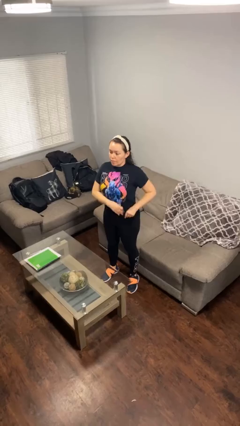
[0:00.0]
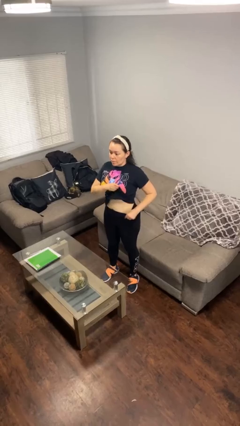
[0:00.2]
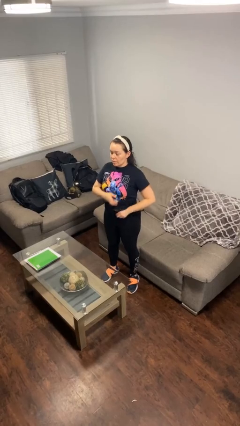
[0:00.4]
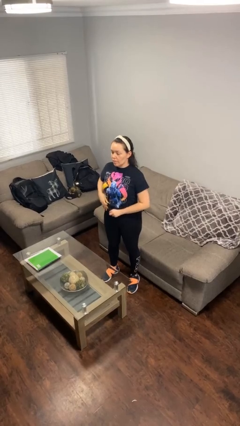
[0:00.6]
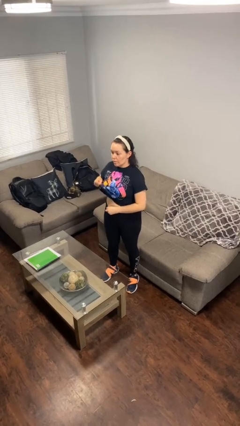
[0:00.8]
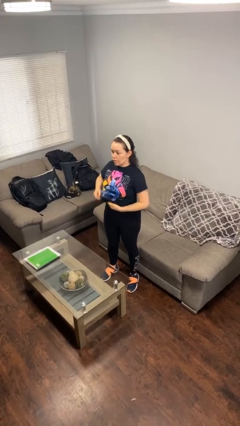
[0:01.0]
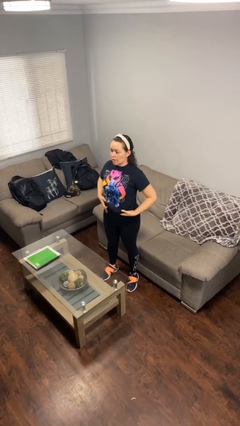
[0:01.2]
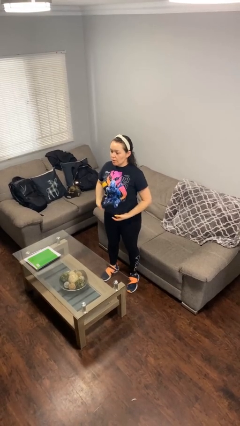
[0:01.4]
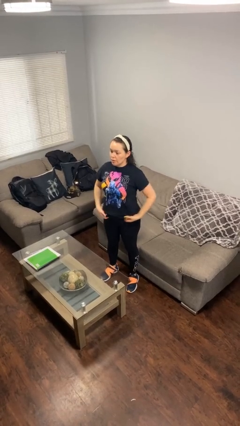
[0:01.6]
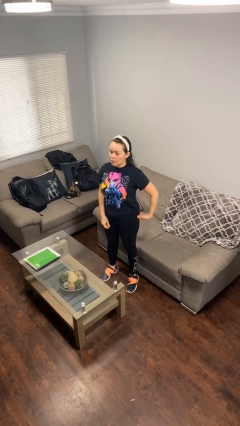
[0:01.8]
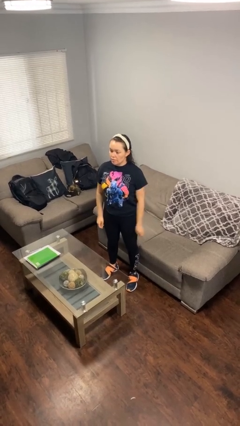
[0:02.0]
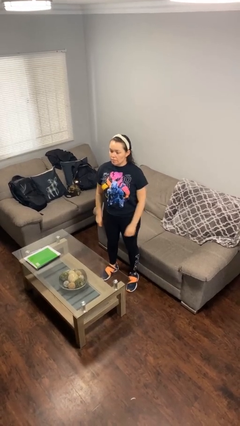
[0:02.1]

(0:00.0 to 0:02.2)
person untucks shirt

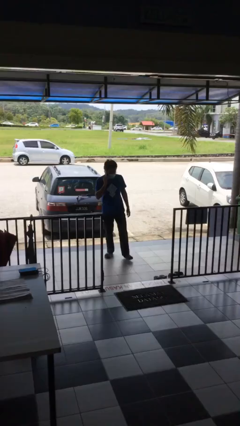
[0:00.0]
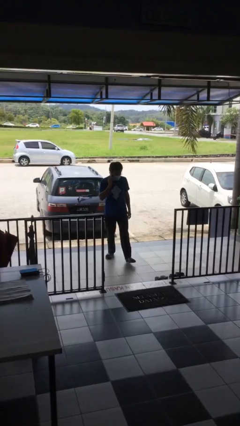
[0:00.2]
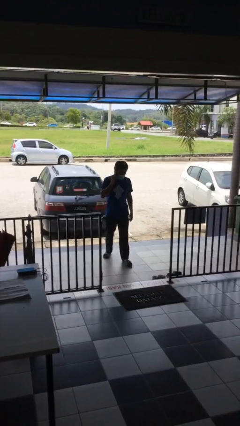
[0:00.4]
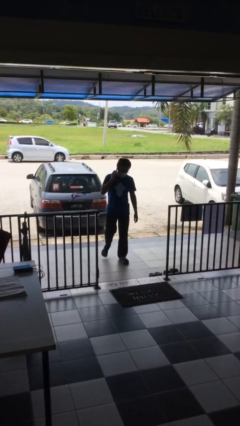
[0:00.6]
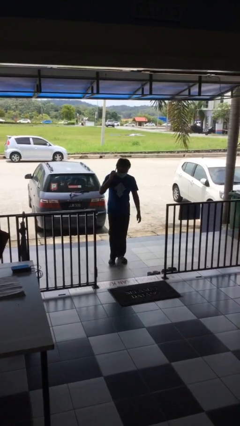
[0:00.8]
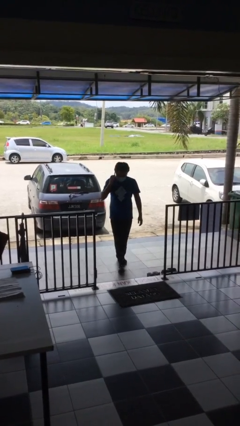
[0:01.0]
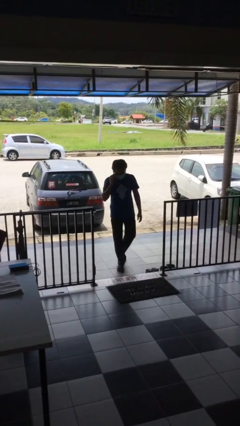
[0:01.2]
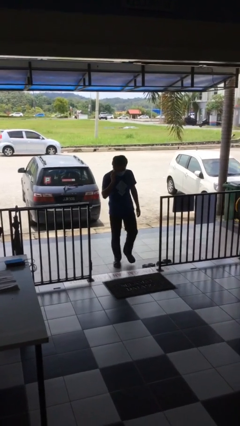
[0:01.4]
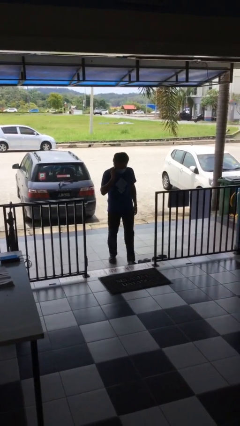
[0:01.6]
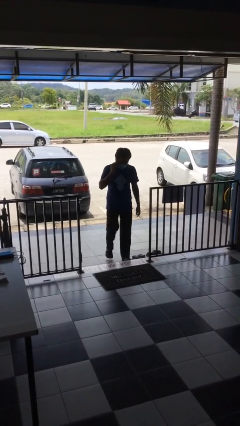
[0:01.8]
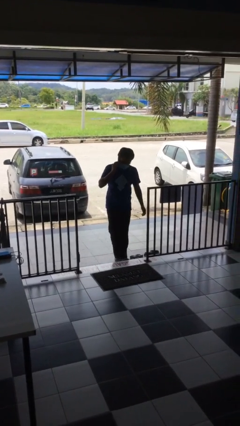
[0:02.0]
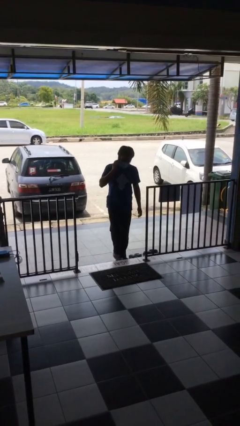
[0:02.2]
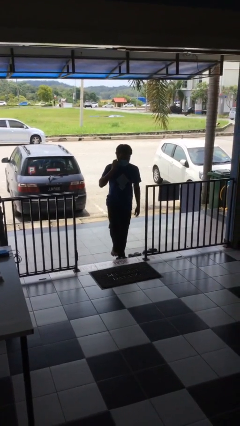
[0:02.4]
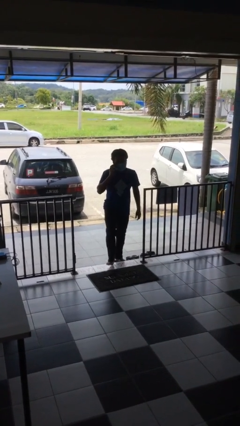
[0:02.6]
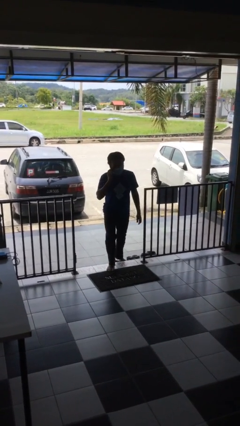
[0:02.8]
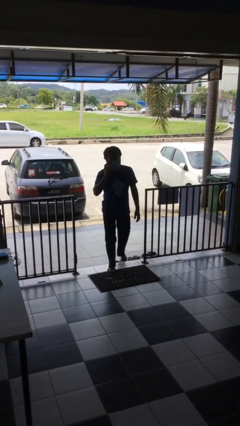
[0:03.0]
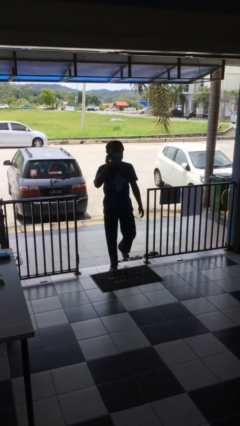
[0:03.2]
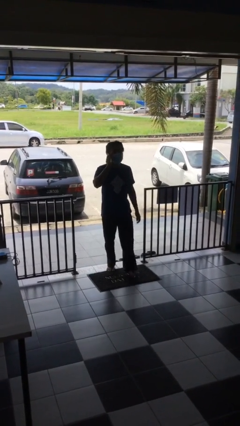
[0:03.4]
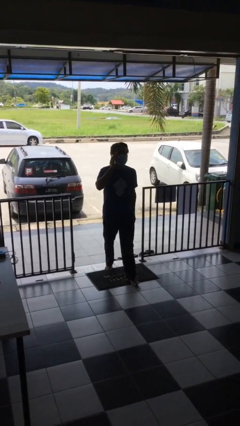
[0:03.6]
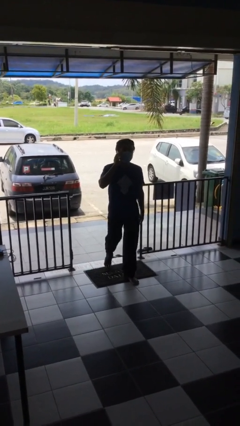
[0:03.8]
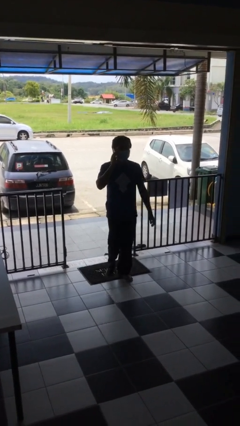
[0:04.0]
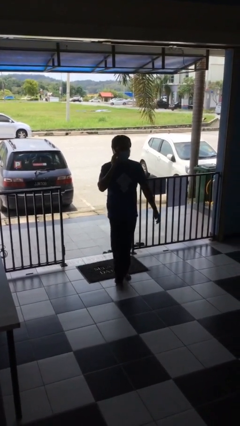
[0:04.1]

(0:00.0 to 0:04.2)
person enters scene through structure

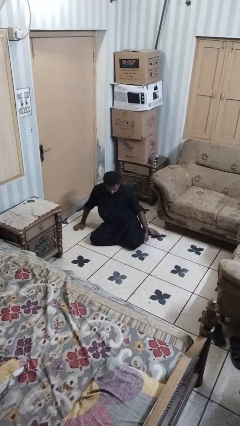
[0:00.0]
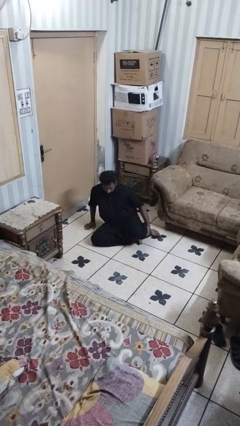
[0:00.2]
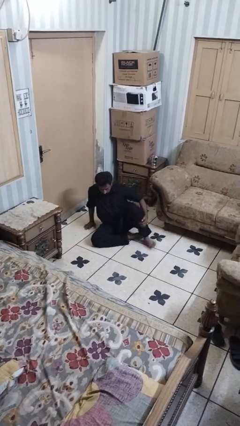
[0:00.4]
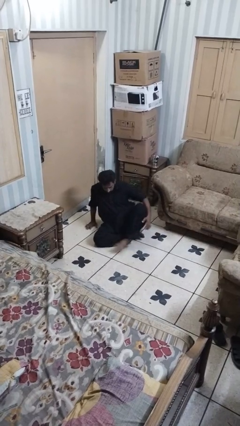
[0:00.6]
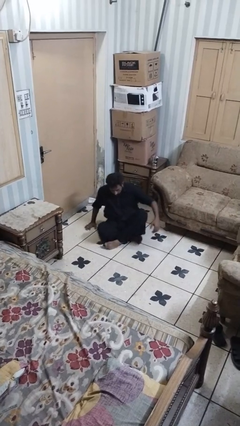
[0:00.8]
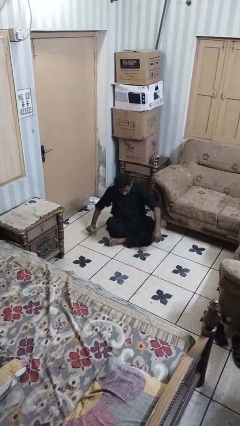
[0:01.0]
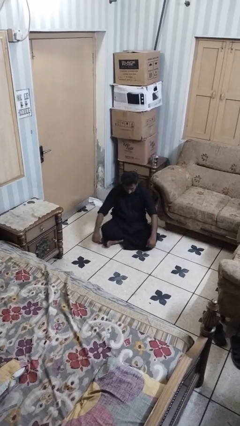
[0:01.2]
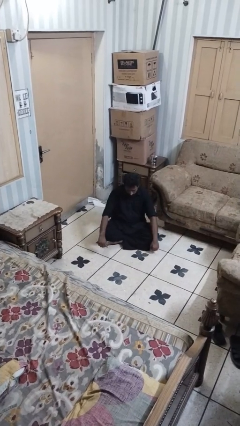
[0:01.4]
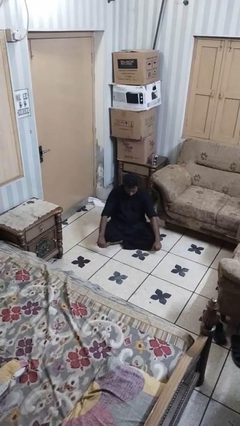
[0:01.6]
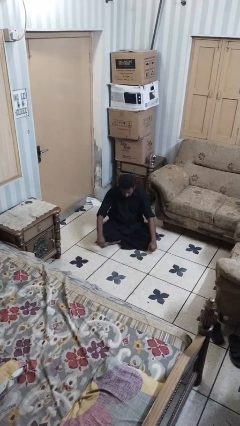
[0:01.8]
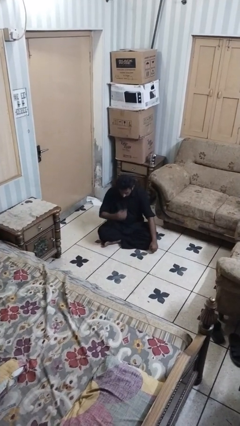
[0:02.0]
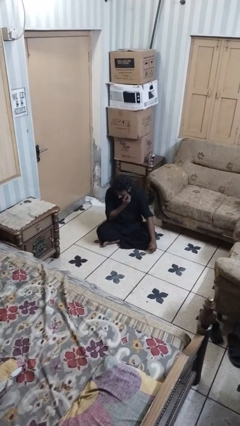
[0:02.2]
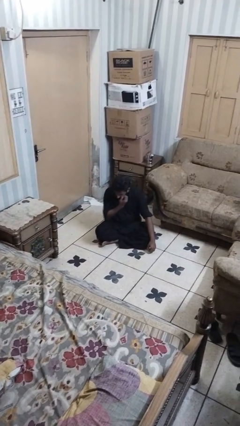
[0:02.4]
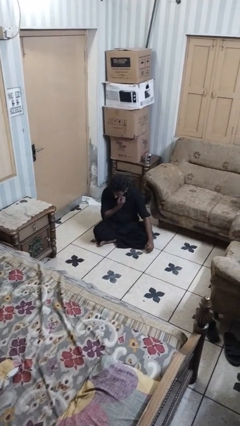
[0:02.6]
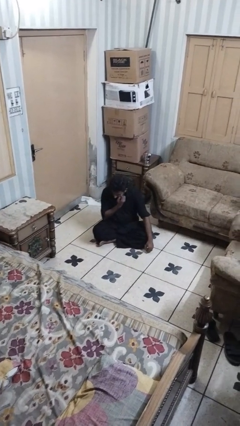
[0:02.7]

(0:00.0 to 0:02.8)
person crosses legs

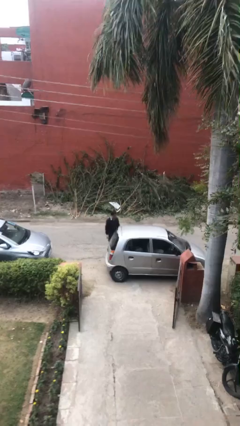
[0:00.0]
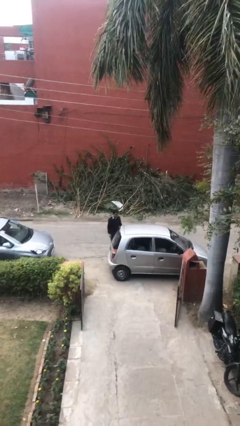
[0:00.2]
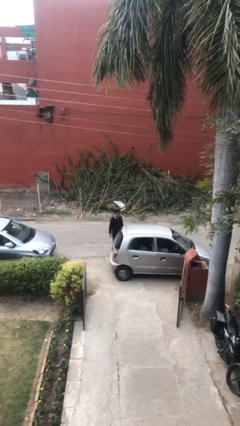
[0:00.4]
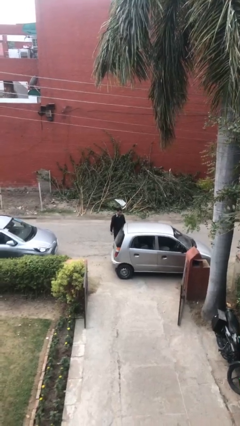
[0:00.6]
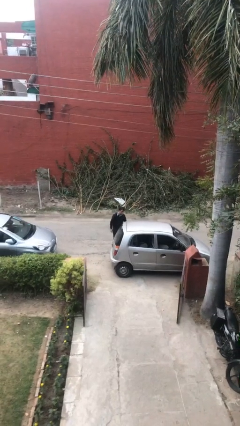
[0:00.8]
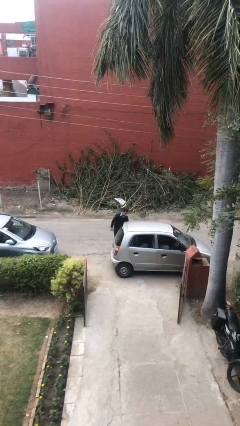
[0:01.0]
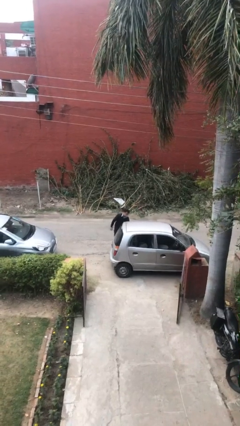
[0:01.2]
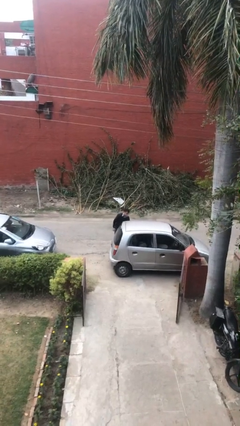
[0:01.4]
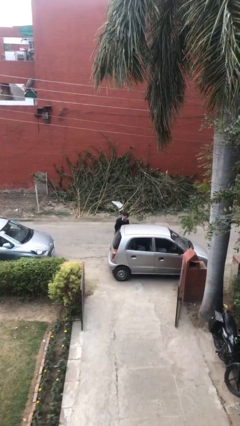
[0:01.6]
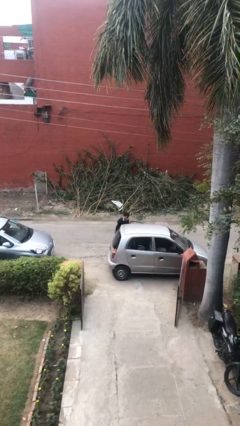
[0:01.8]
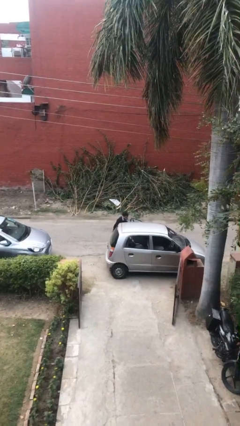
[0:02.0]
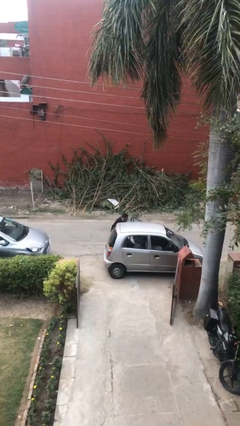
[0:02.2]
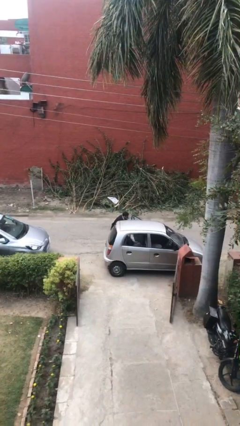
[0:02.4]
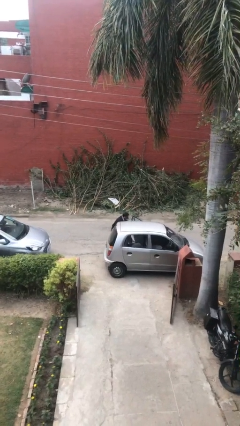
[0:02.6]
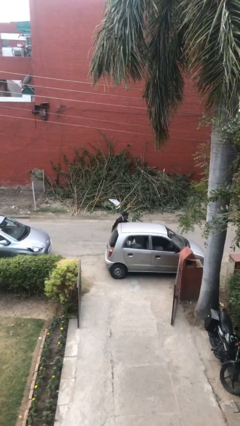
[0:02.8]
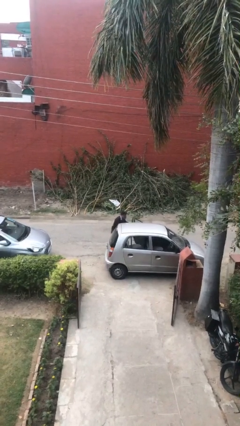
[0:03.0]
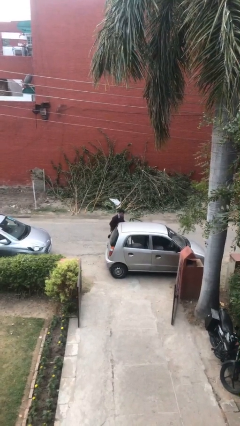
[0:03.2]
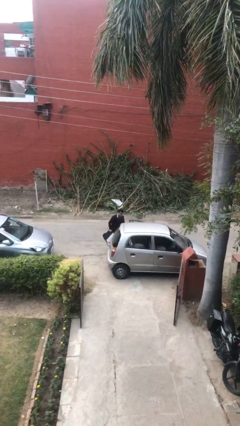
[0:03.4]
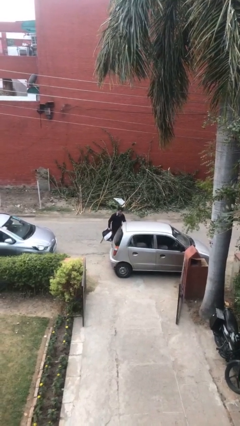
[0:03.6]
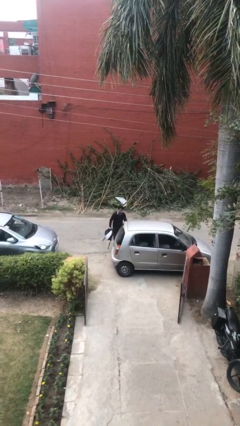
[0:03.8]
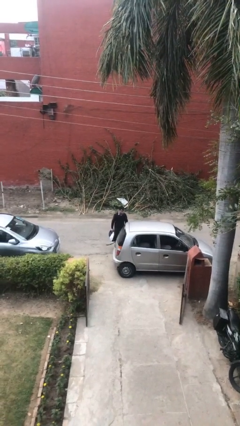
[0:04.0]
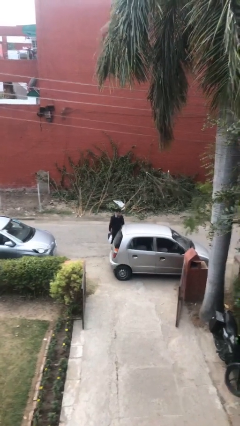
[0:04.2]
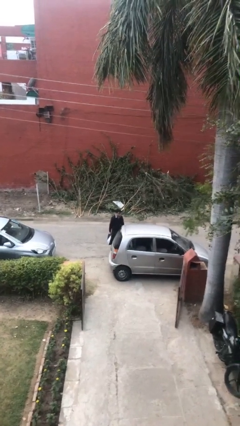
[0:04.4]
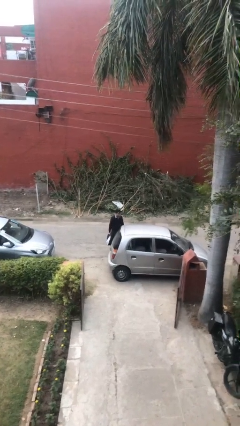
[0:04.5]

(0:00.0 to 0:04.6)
person unloads car

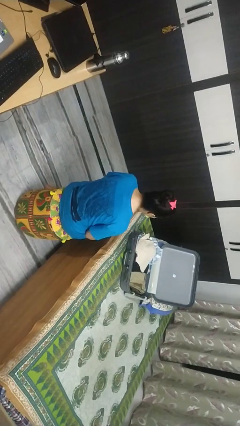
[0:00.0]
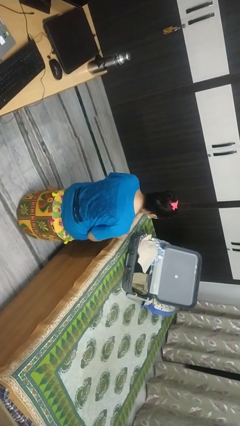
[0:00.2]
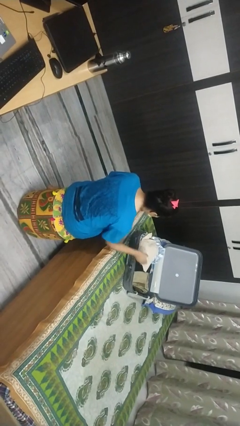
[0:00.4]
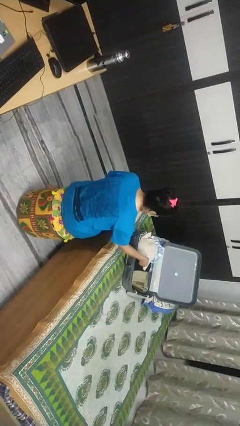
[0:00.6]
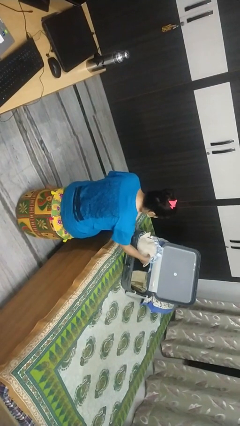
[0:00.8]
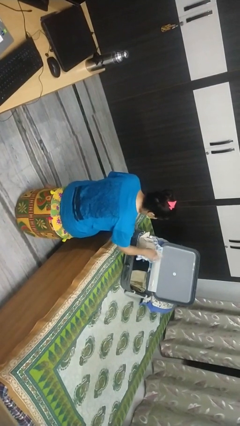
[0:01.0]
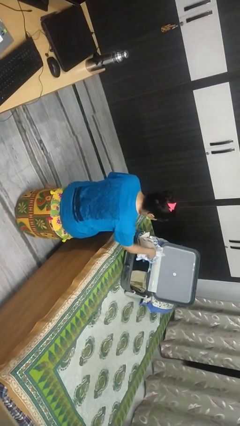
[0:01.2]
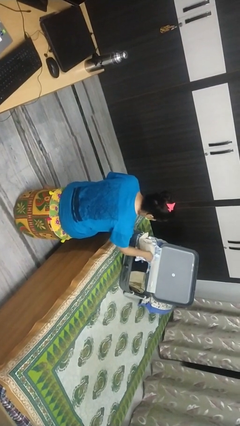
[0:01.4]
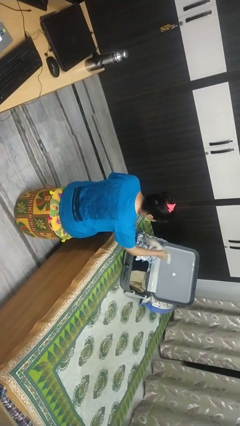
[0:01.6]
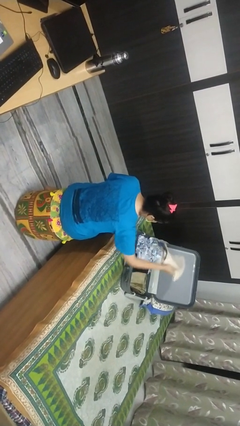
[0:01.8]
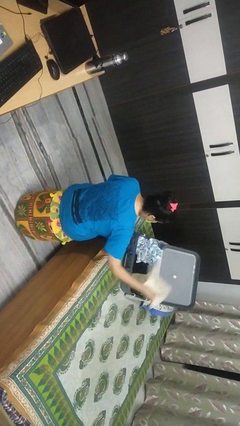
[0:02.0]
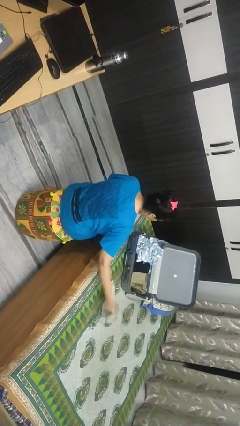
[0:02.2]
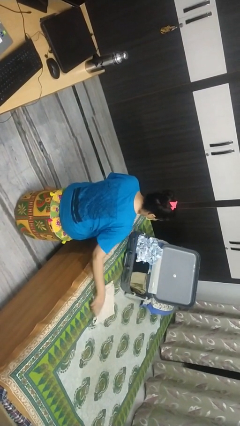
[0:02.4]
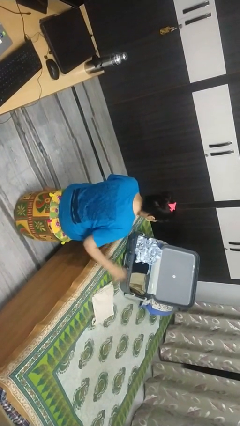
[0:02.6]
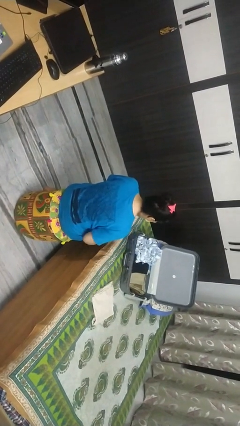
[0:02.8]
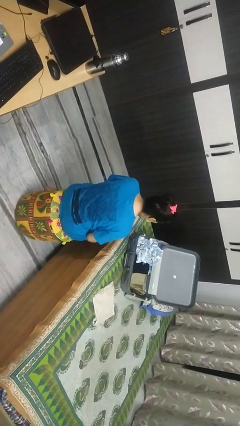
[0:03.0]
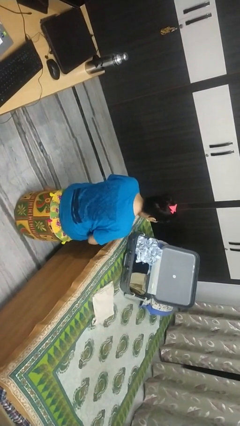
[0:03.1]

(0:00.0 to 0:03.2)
person unloads clothes from suitcase

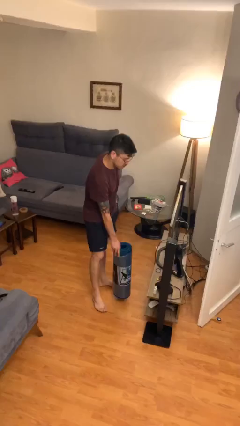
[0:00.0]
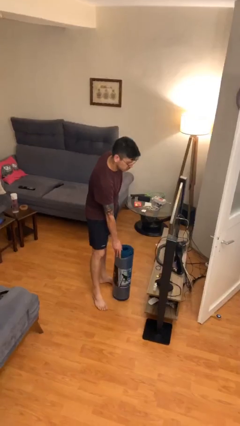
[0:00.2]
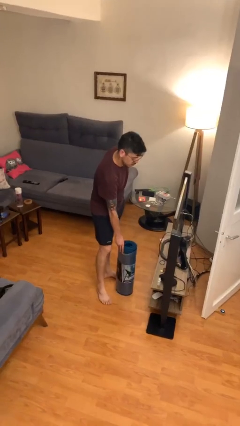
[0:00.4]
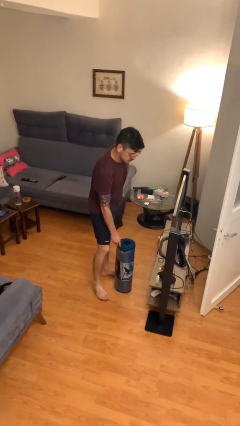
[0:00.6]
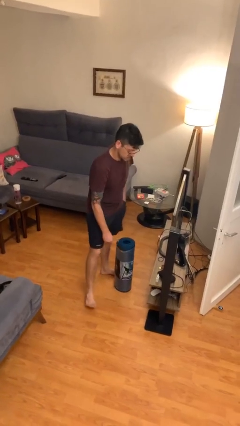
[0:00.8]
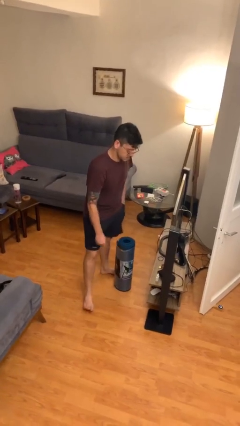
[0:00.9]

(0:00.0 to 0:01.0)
person puts down object on floor
